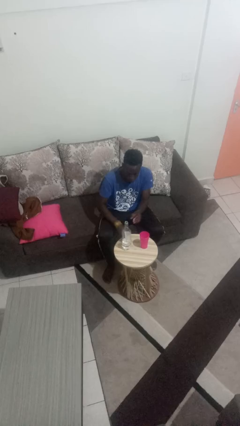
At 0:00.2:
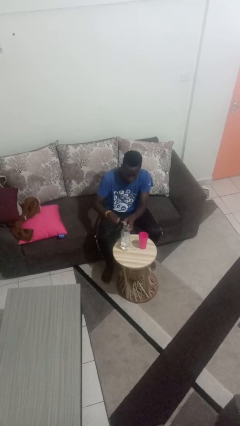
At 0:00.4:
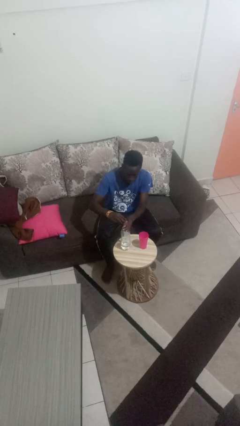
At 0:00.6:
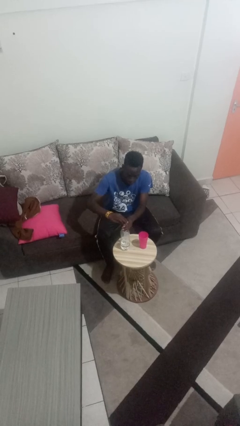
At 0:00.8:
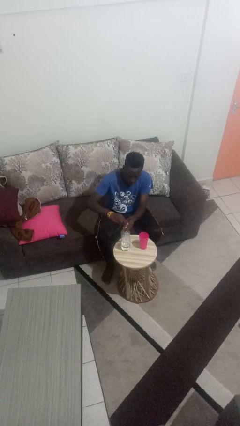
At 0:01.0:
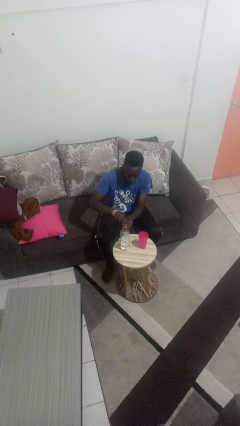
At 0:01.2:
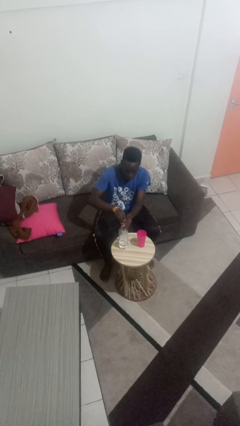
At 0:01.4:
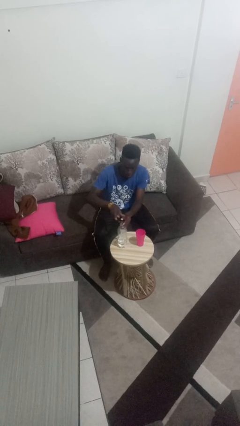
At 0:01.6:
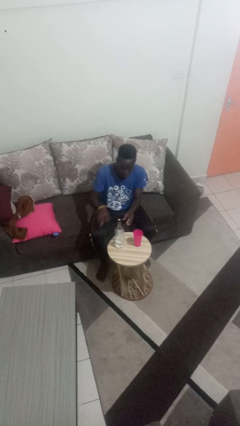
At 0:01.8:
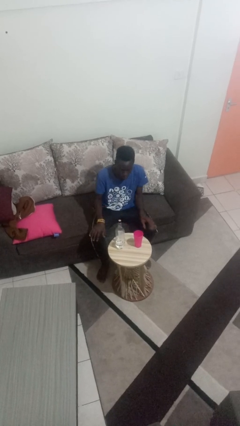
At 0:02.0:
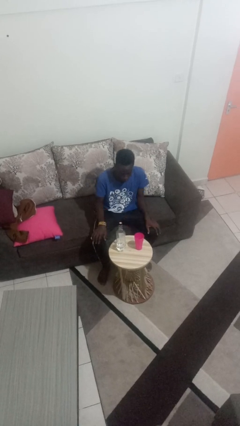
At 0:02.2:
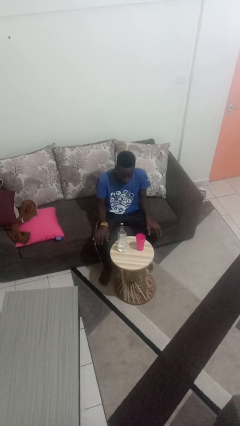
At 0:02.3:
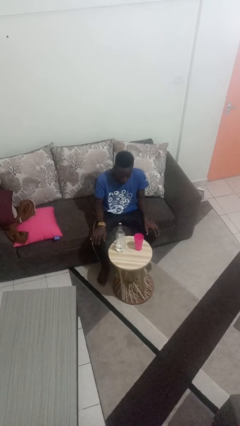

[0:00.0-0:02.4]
person screws lid to bottle

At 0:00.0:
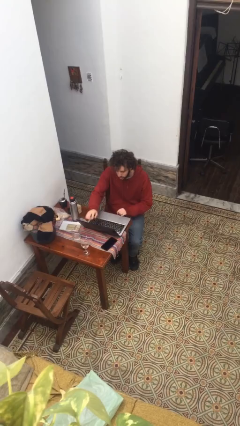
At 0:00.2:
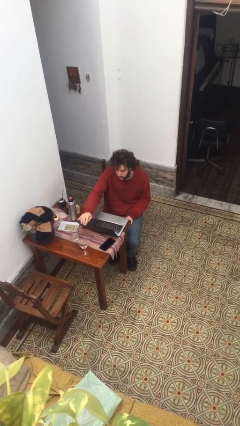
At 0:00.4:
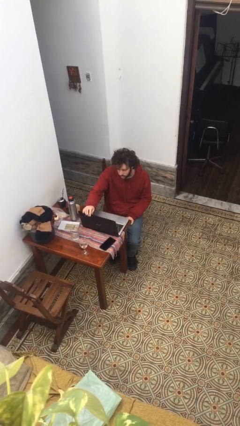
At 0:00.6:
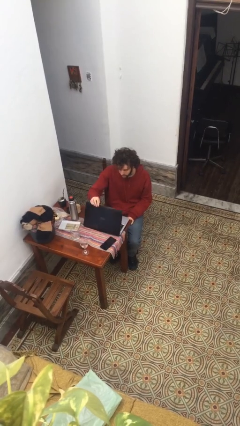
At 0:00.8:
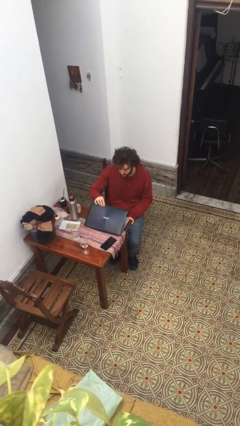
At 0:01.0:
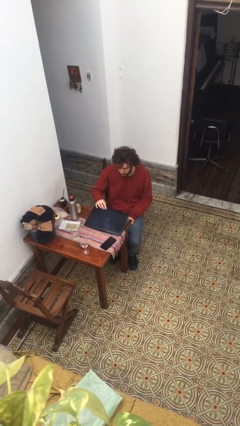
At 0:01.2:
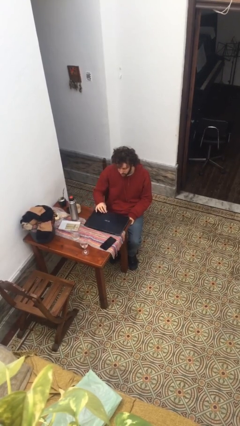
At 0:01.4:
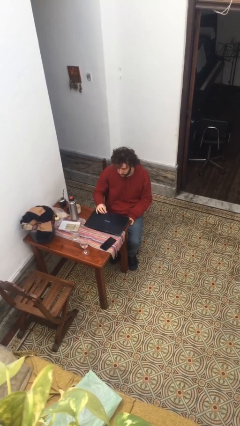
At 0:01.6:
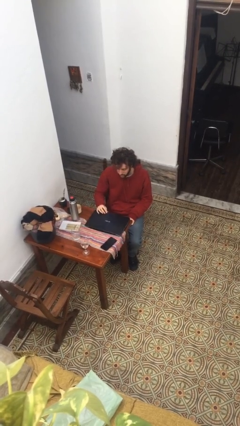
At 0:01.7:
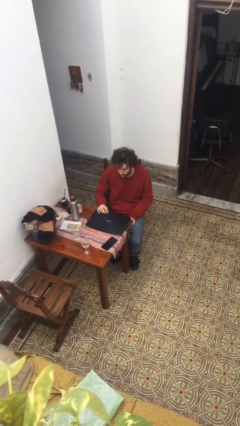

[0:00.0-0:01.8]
person closes laptop

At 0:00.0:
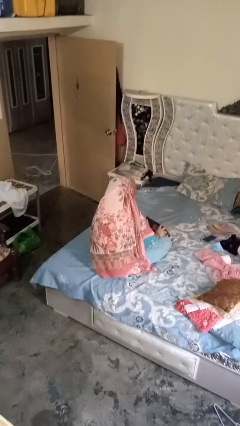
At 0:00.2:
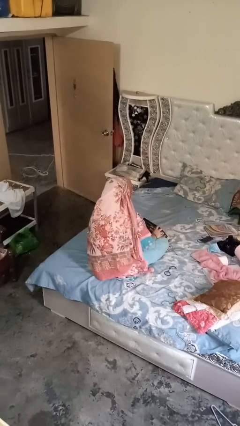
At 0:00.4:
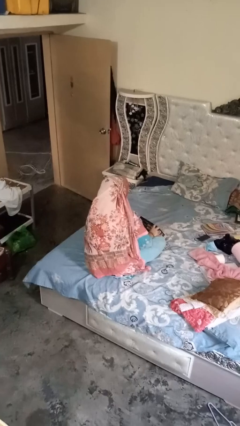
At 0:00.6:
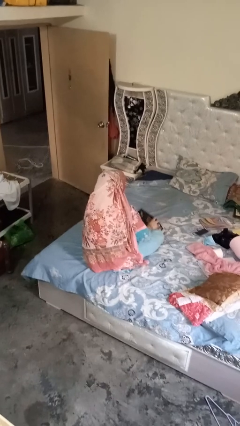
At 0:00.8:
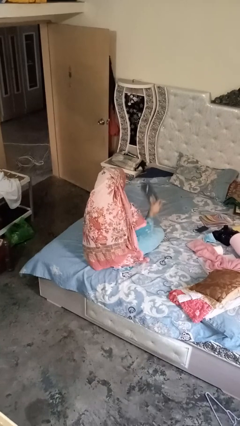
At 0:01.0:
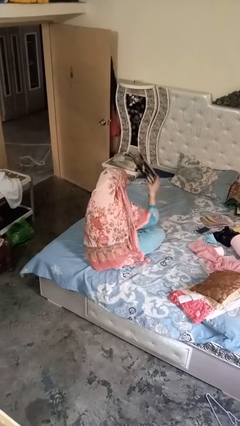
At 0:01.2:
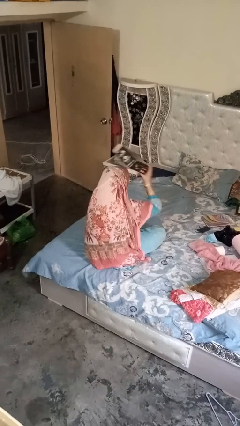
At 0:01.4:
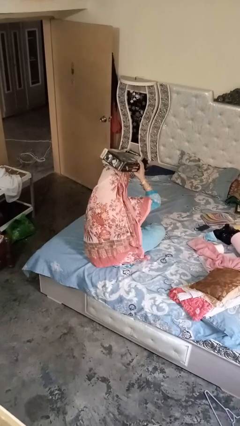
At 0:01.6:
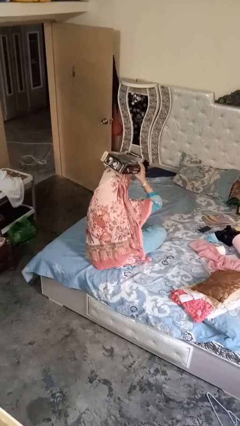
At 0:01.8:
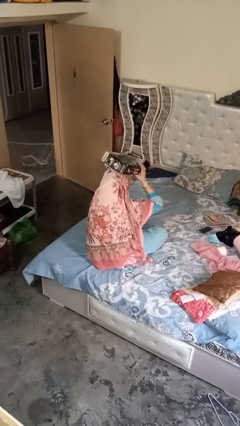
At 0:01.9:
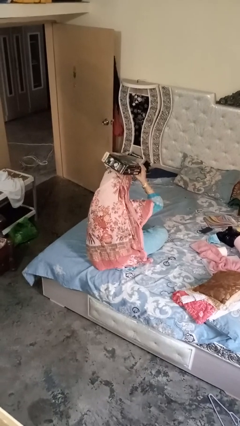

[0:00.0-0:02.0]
person holds object above head

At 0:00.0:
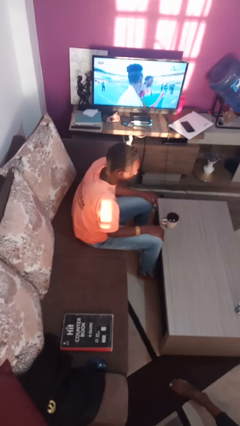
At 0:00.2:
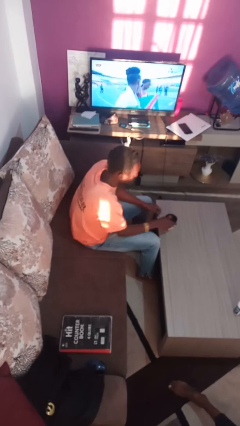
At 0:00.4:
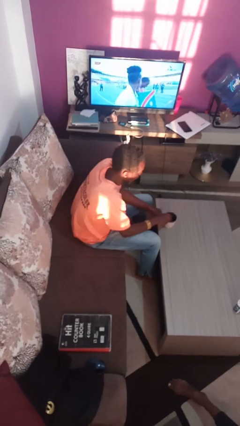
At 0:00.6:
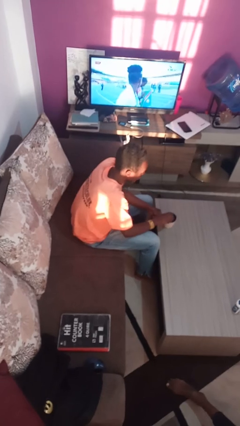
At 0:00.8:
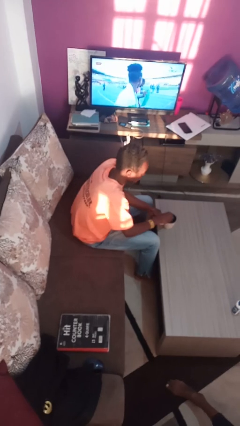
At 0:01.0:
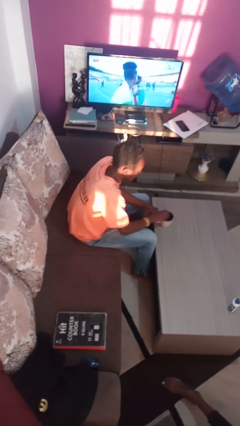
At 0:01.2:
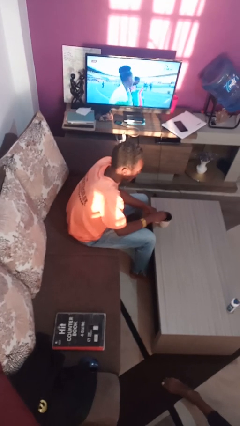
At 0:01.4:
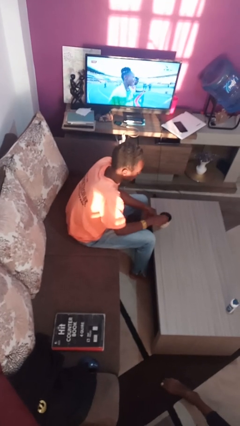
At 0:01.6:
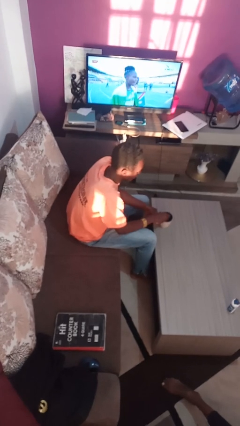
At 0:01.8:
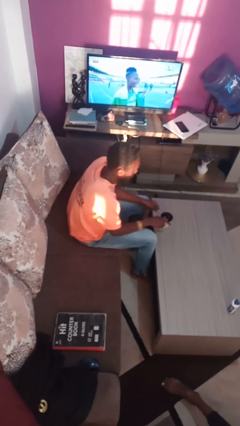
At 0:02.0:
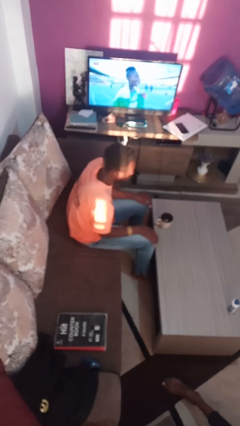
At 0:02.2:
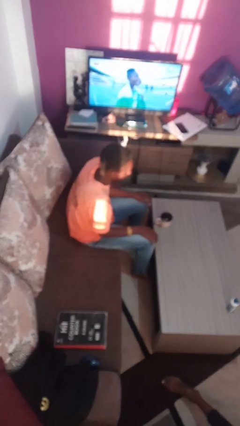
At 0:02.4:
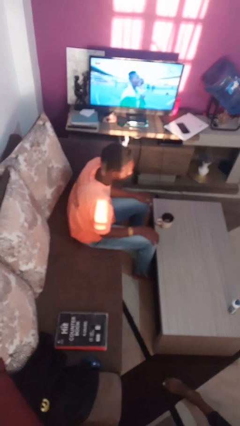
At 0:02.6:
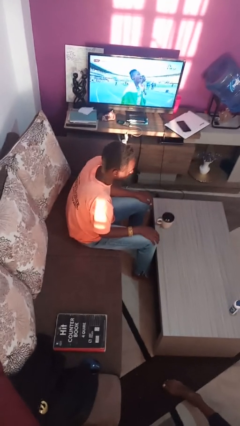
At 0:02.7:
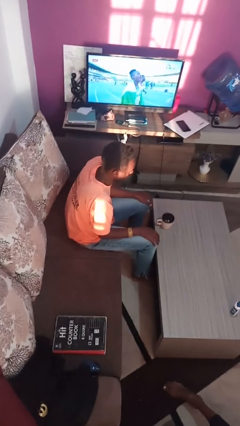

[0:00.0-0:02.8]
person stirs mug

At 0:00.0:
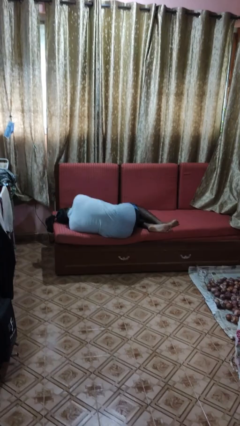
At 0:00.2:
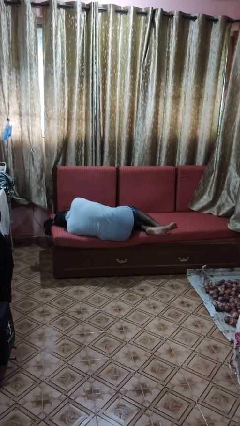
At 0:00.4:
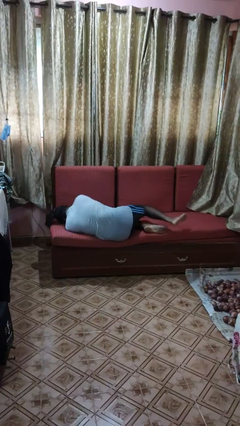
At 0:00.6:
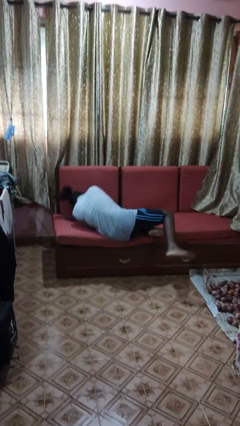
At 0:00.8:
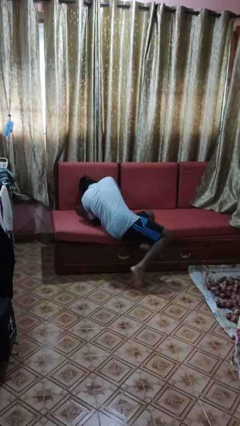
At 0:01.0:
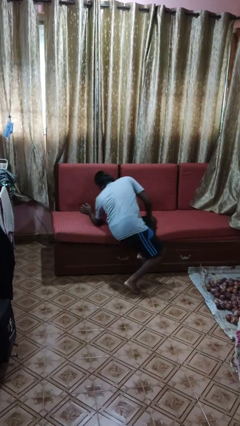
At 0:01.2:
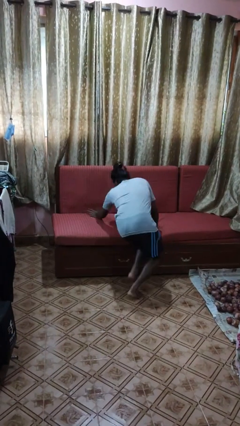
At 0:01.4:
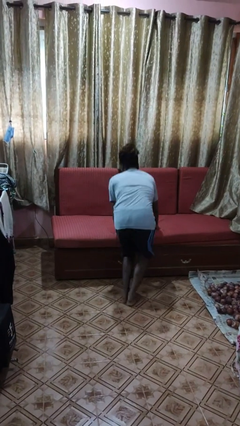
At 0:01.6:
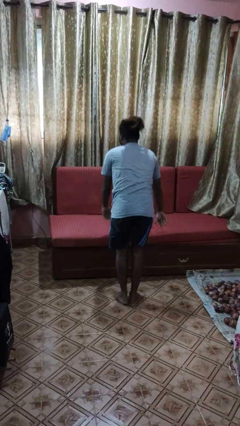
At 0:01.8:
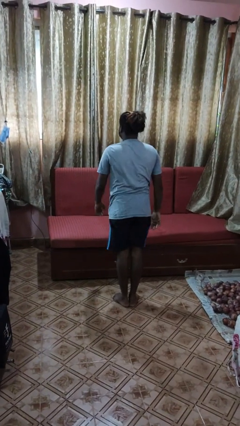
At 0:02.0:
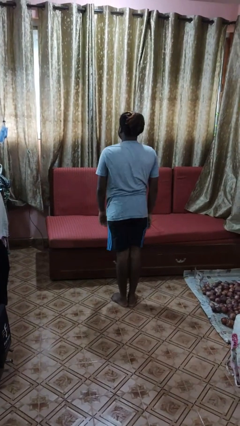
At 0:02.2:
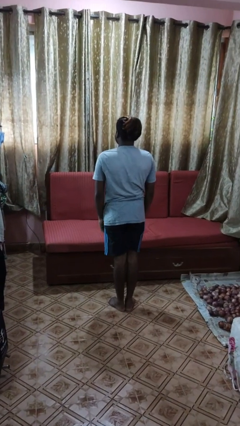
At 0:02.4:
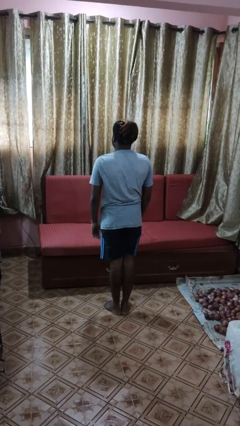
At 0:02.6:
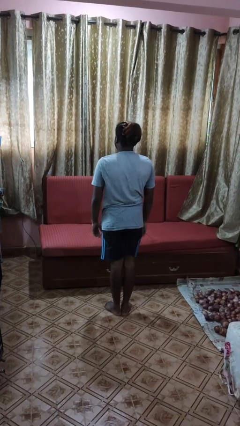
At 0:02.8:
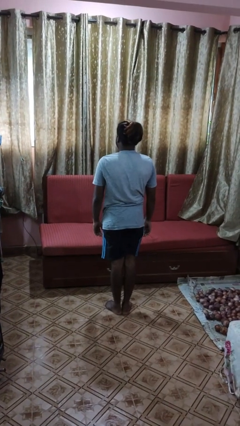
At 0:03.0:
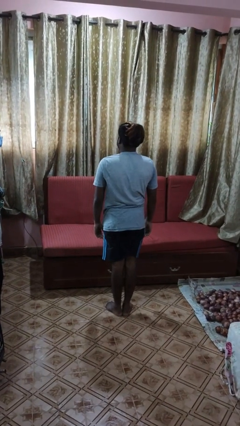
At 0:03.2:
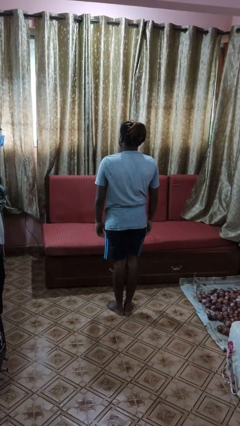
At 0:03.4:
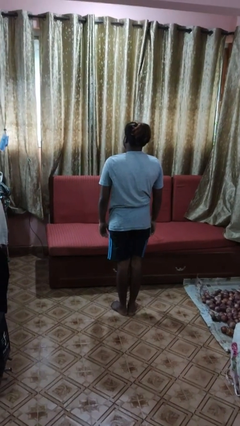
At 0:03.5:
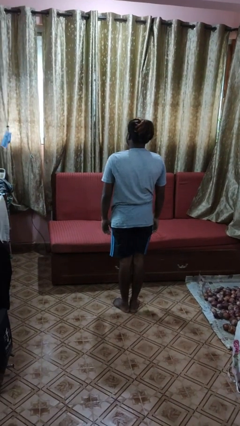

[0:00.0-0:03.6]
person stands up

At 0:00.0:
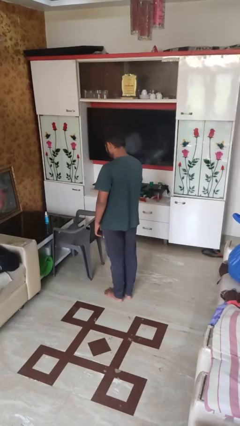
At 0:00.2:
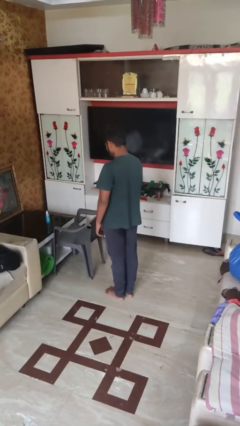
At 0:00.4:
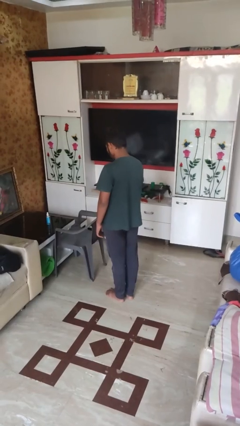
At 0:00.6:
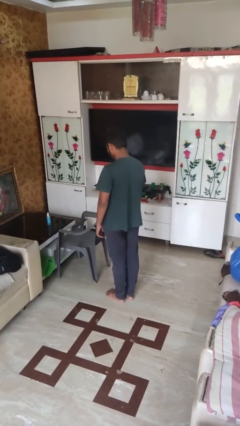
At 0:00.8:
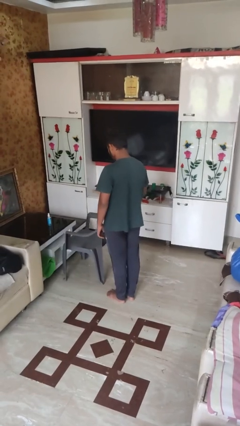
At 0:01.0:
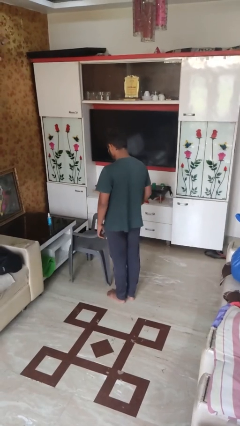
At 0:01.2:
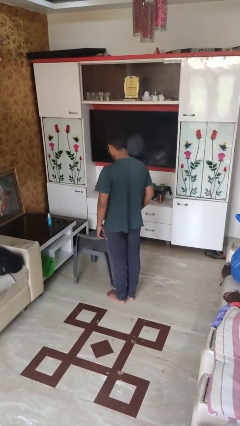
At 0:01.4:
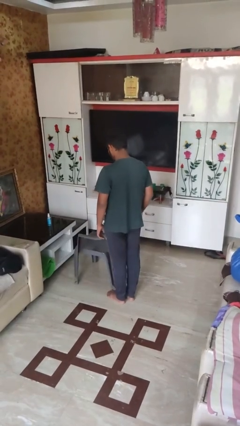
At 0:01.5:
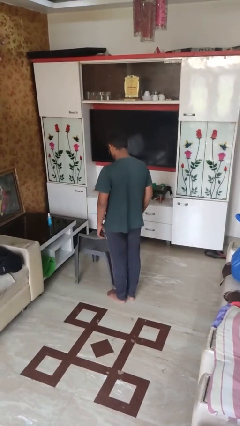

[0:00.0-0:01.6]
person pulls out chair

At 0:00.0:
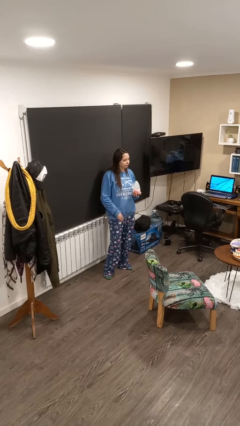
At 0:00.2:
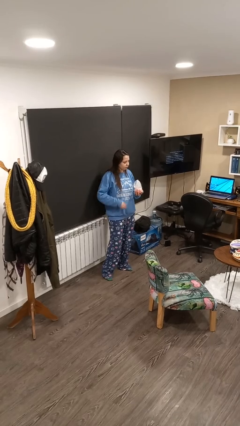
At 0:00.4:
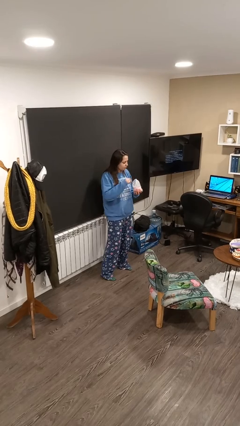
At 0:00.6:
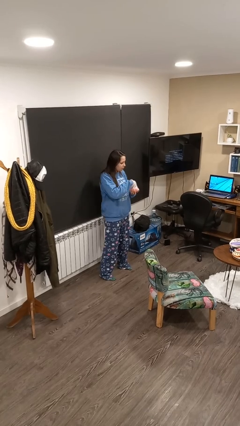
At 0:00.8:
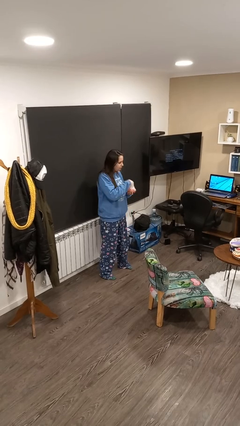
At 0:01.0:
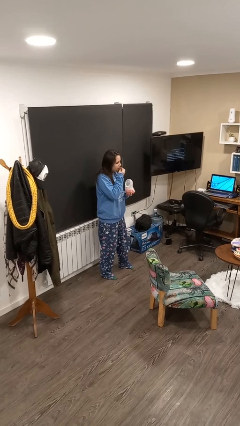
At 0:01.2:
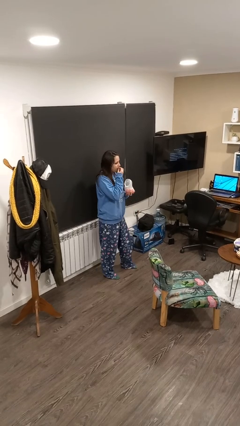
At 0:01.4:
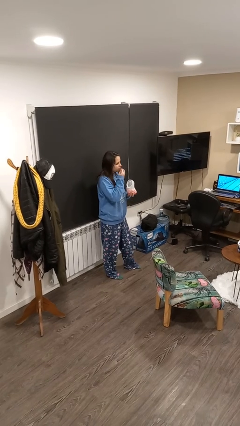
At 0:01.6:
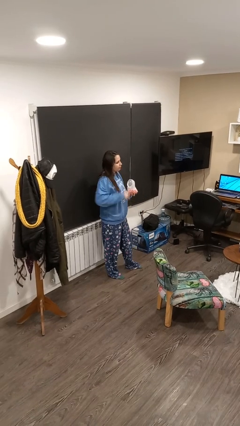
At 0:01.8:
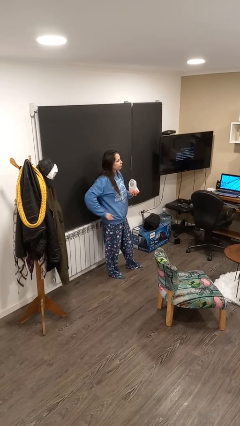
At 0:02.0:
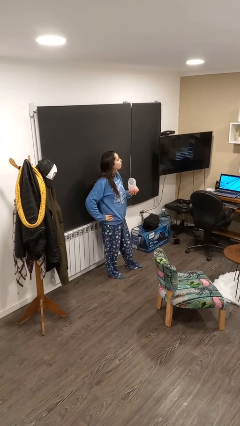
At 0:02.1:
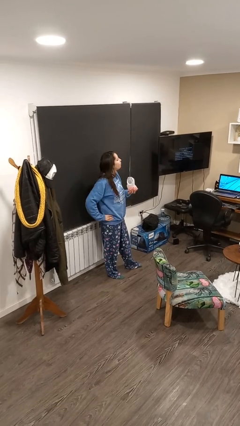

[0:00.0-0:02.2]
person eats snack from bag

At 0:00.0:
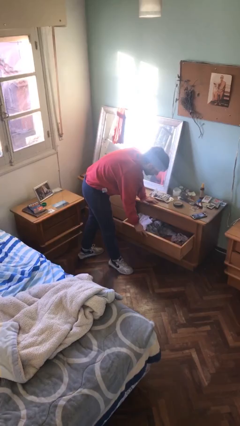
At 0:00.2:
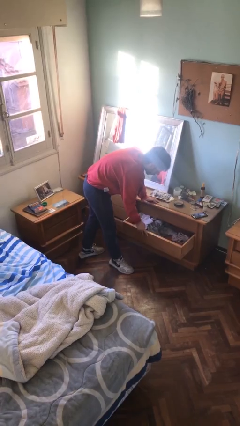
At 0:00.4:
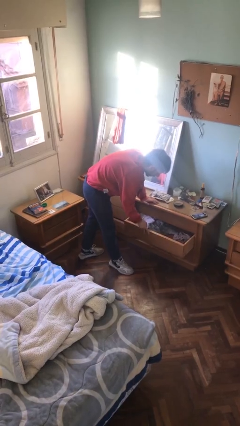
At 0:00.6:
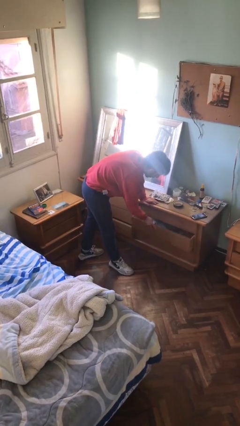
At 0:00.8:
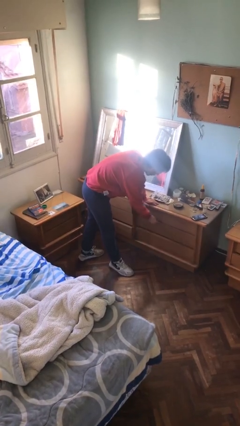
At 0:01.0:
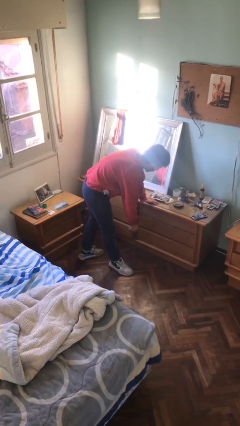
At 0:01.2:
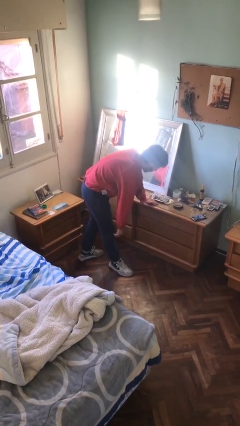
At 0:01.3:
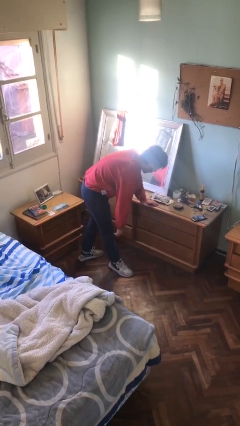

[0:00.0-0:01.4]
person closes dresser drawer
